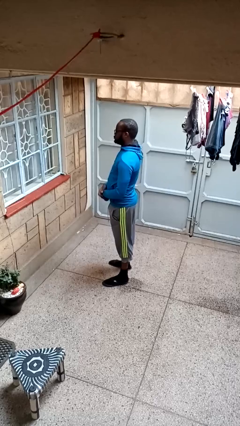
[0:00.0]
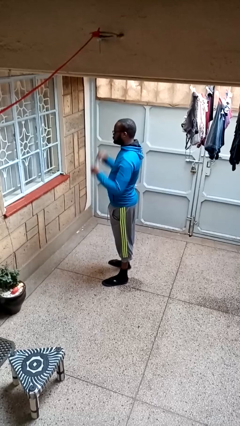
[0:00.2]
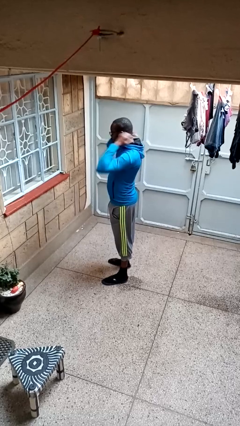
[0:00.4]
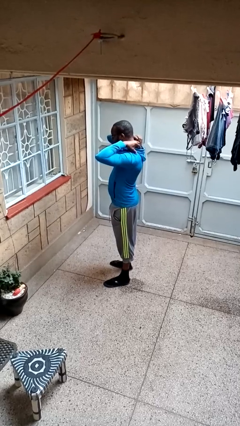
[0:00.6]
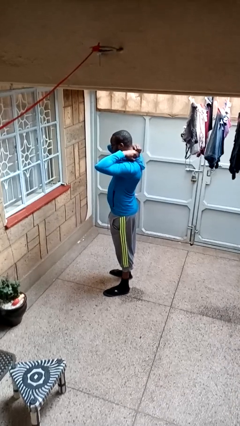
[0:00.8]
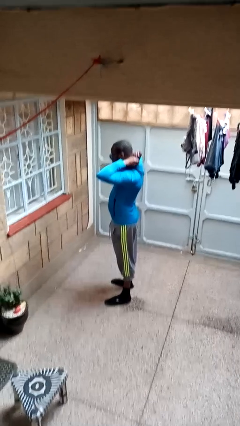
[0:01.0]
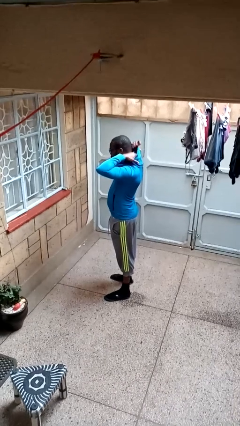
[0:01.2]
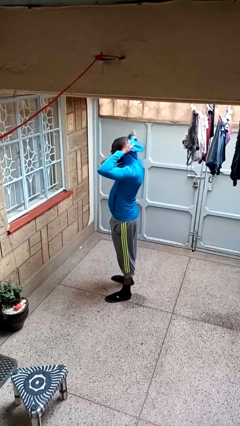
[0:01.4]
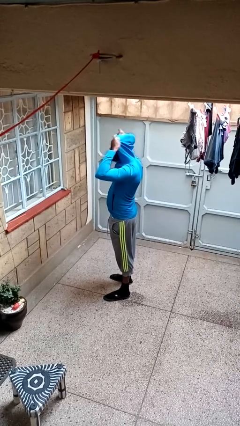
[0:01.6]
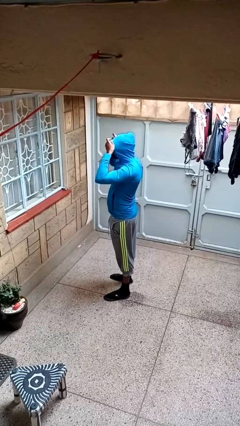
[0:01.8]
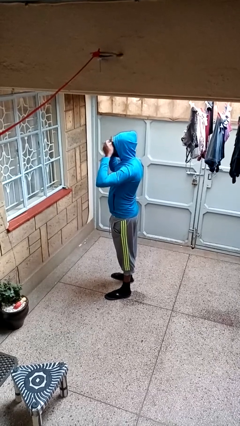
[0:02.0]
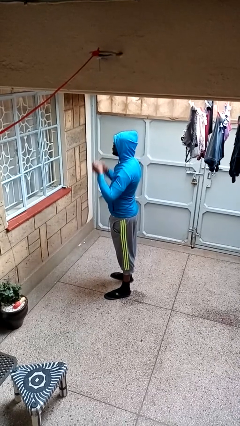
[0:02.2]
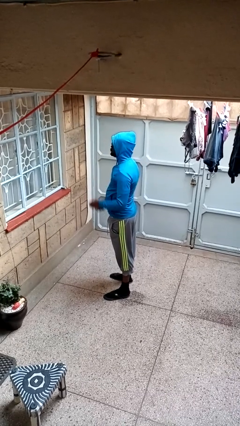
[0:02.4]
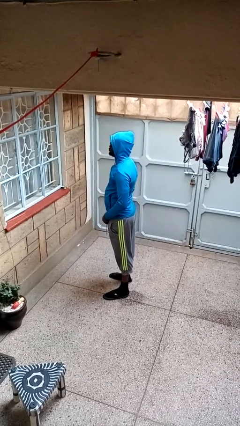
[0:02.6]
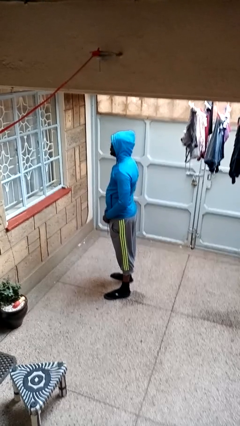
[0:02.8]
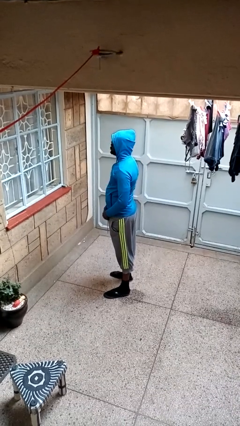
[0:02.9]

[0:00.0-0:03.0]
person puts on hoodie

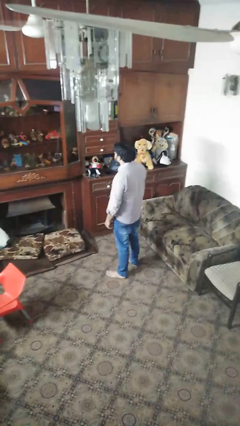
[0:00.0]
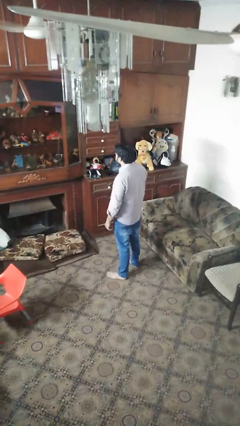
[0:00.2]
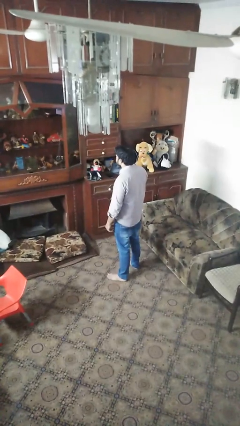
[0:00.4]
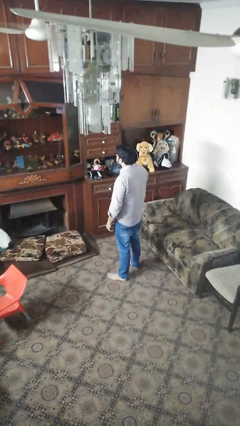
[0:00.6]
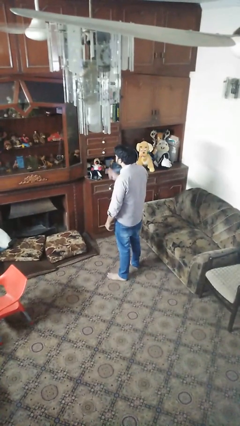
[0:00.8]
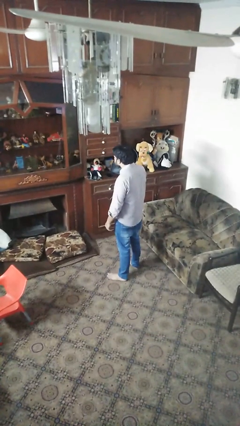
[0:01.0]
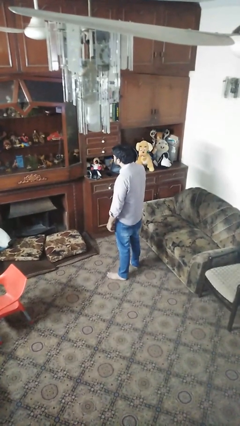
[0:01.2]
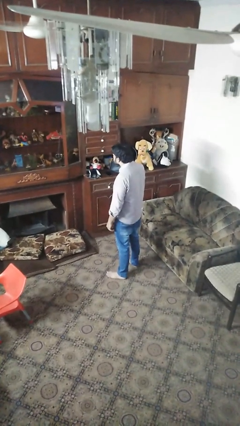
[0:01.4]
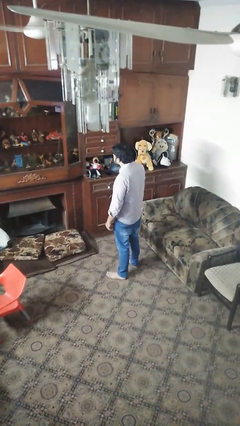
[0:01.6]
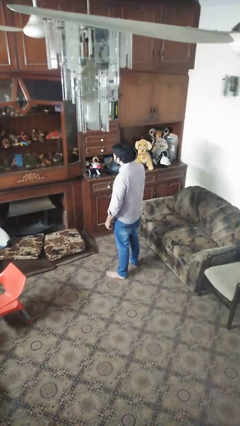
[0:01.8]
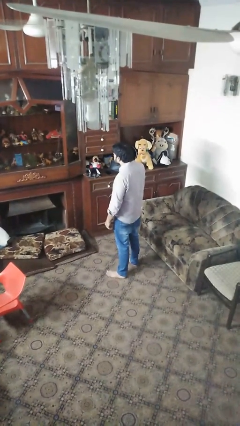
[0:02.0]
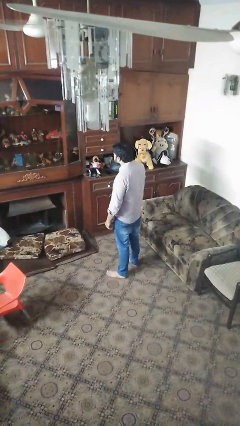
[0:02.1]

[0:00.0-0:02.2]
person gestures listen closely

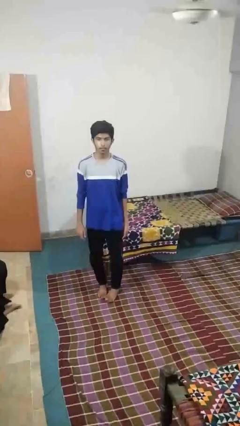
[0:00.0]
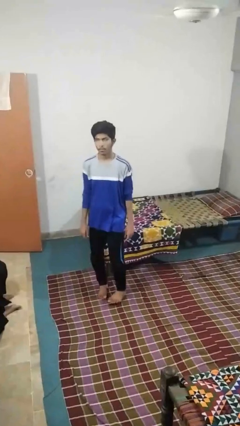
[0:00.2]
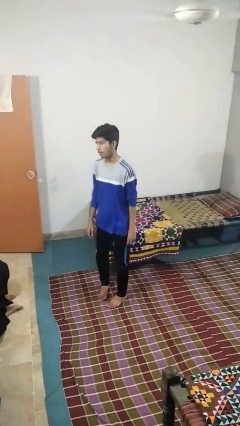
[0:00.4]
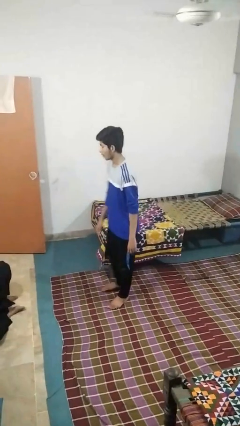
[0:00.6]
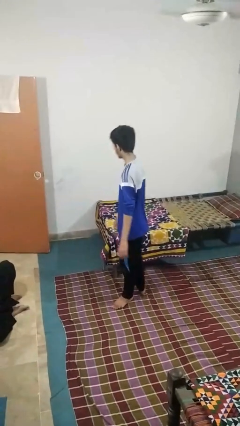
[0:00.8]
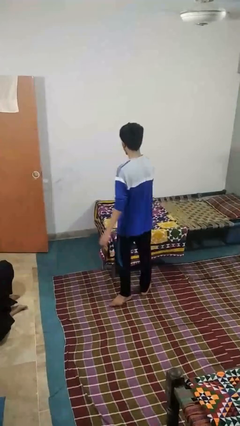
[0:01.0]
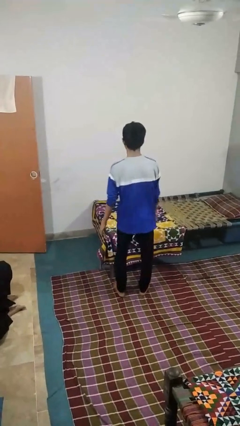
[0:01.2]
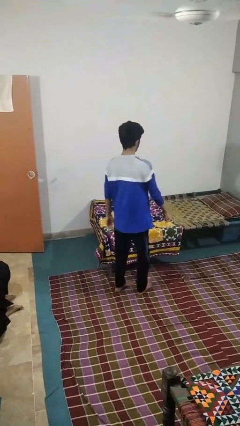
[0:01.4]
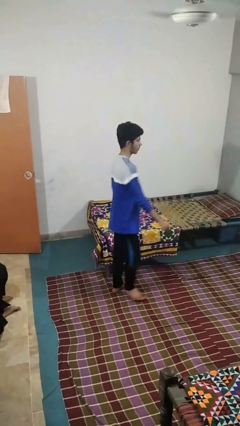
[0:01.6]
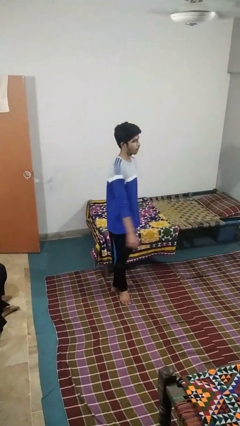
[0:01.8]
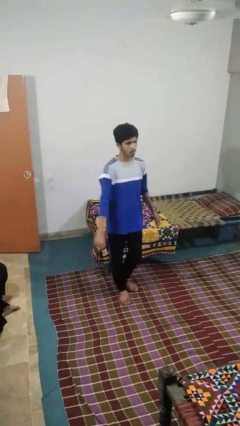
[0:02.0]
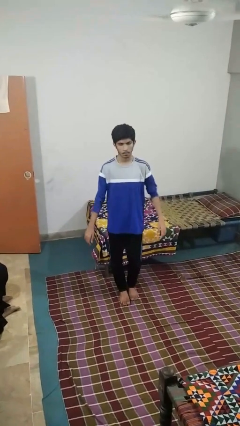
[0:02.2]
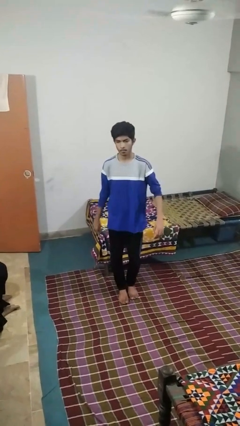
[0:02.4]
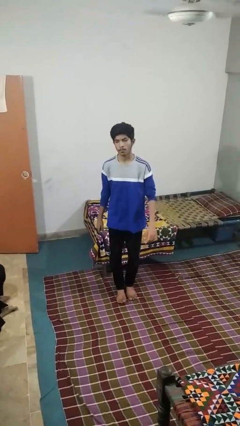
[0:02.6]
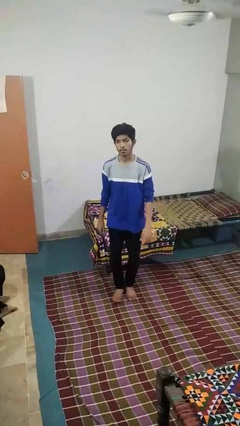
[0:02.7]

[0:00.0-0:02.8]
person twirls

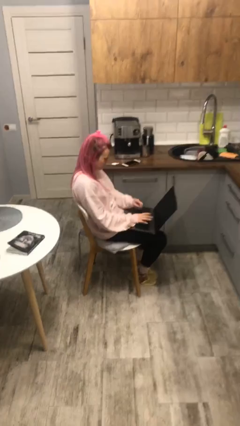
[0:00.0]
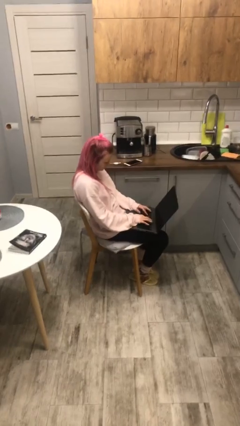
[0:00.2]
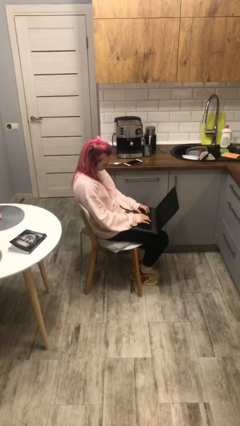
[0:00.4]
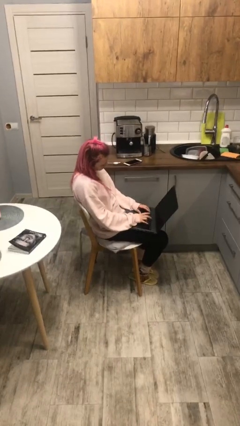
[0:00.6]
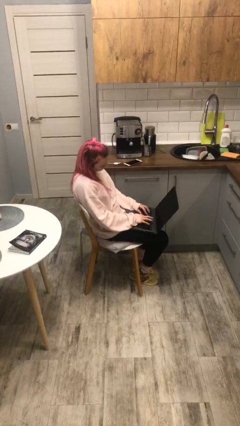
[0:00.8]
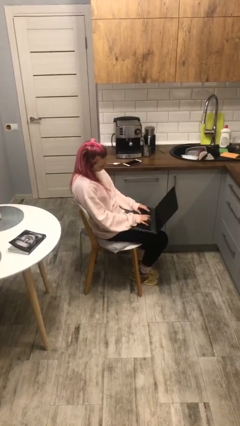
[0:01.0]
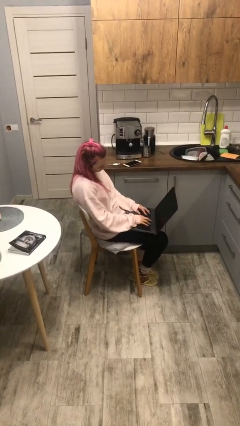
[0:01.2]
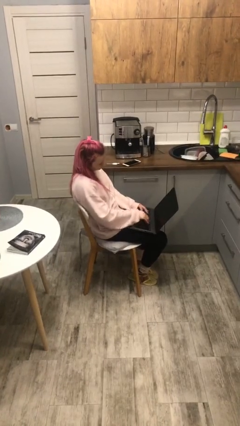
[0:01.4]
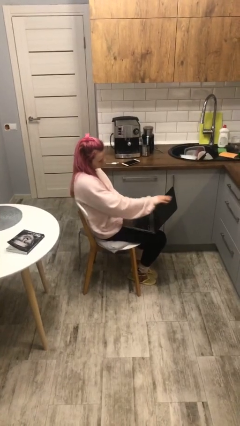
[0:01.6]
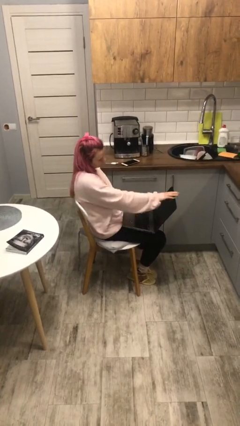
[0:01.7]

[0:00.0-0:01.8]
person interacts with laptop

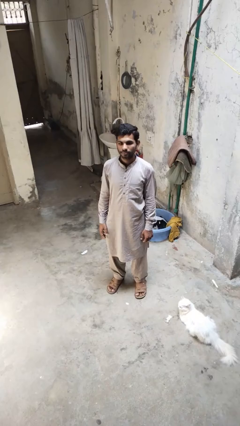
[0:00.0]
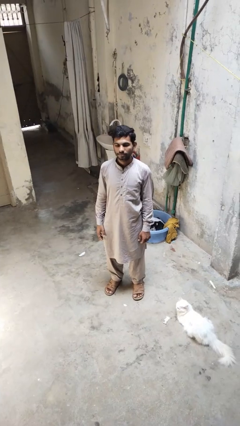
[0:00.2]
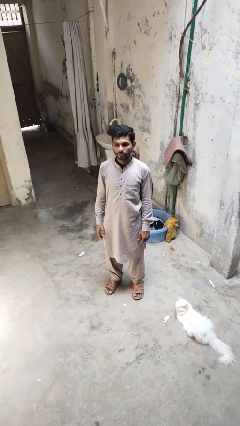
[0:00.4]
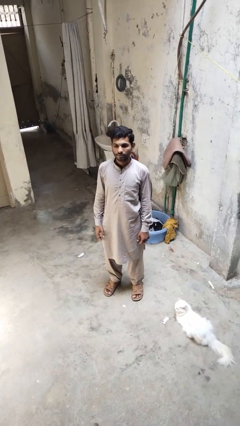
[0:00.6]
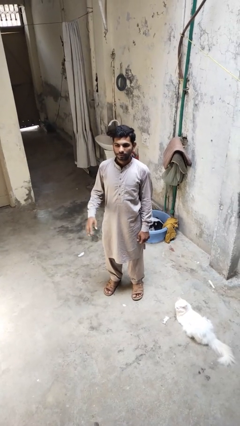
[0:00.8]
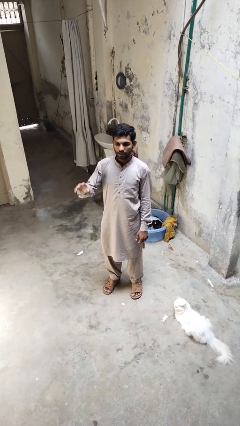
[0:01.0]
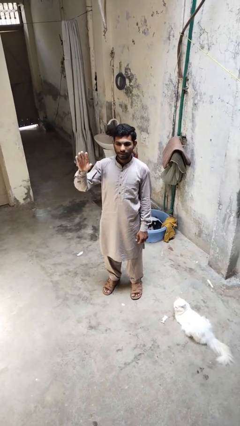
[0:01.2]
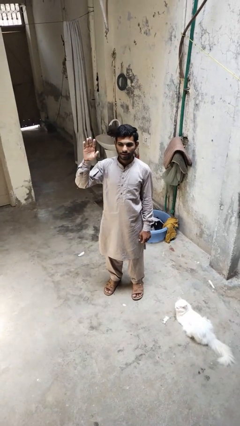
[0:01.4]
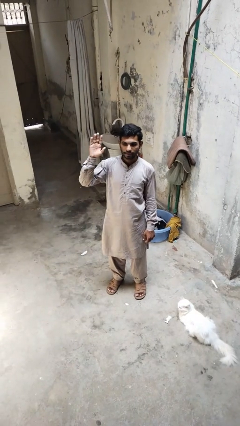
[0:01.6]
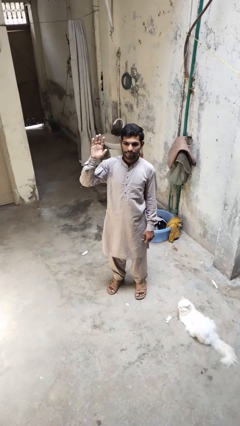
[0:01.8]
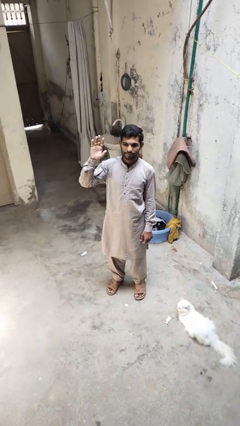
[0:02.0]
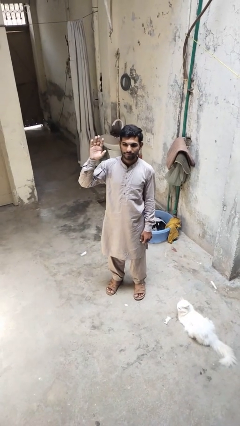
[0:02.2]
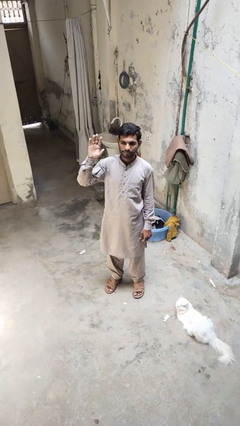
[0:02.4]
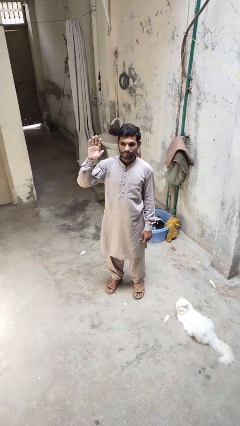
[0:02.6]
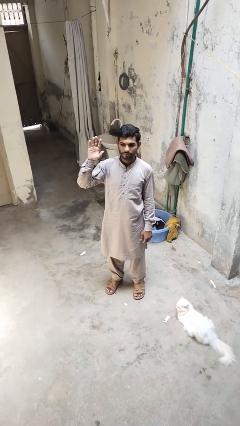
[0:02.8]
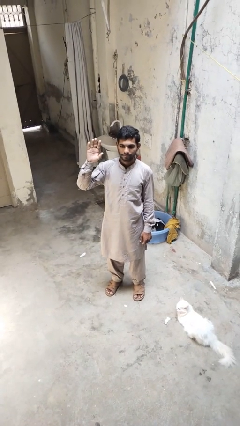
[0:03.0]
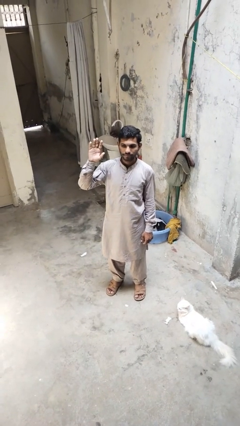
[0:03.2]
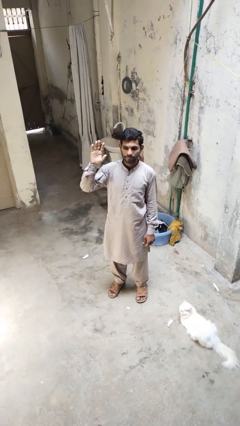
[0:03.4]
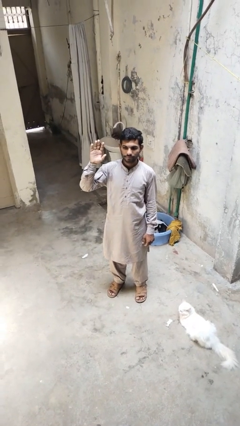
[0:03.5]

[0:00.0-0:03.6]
person gestures raise hand

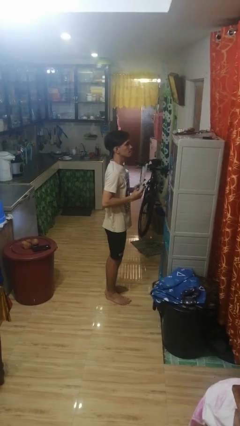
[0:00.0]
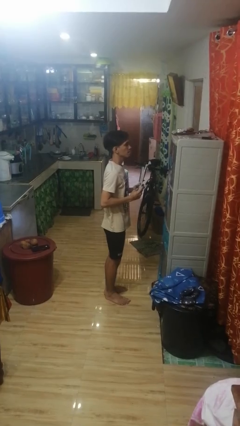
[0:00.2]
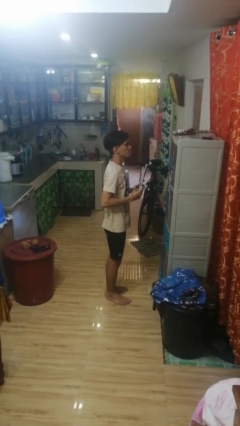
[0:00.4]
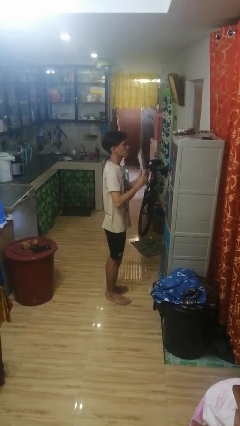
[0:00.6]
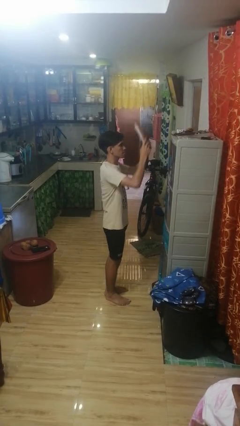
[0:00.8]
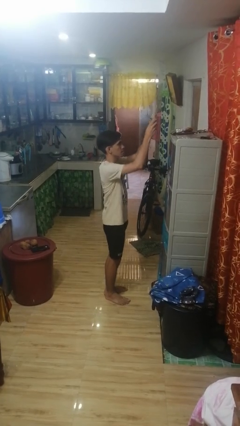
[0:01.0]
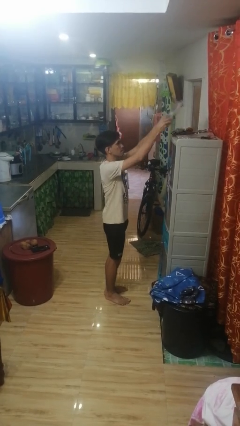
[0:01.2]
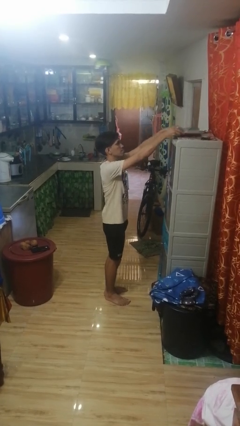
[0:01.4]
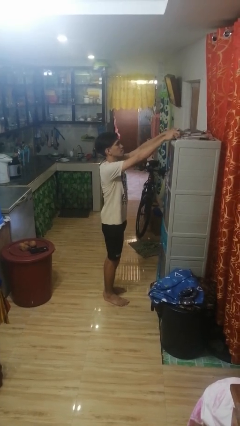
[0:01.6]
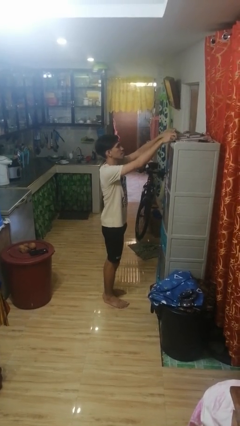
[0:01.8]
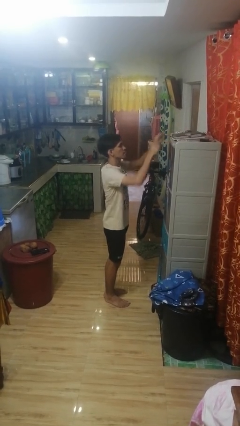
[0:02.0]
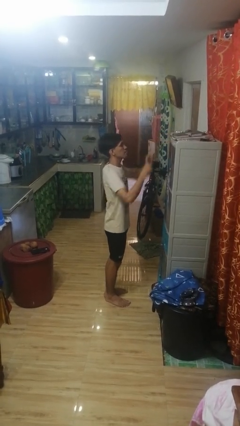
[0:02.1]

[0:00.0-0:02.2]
person puts down object on shelf

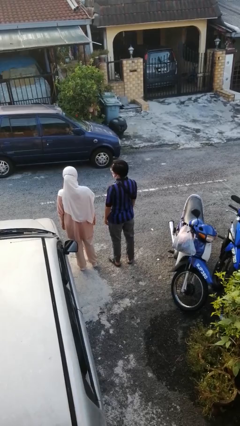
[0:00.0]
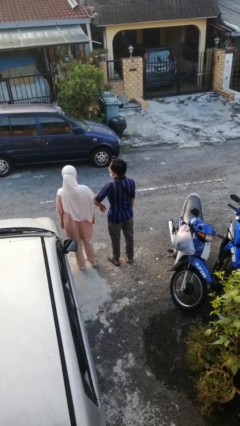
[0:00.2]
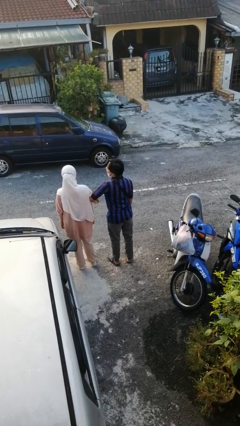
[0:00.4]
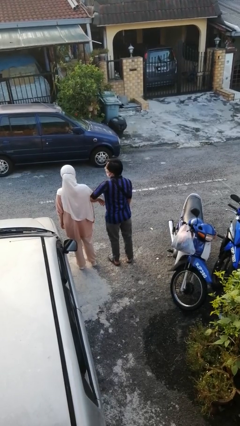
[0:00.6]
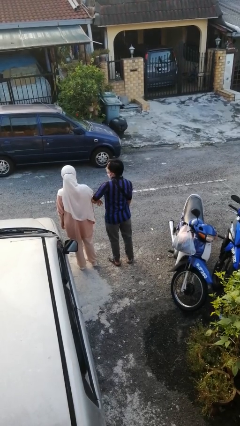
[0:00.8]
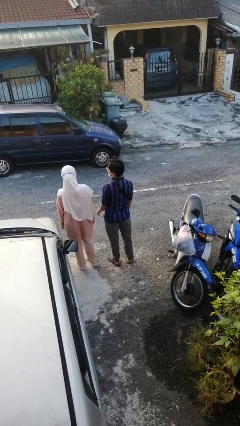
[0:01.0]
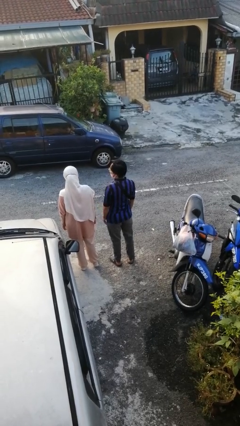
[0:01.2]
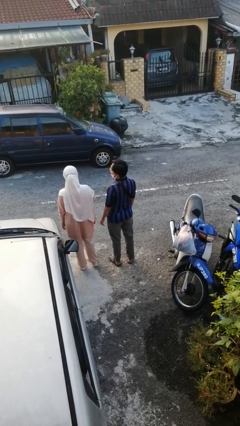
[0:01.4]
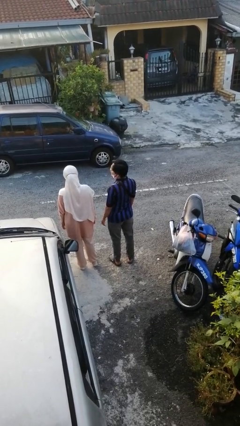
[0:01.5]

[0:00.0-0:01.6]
person nudges person with elbow
